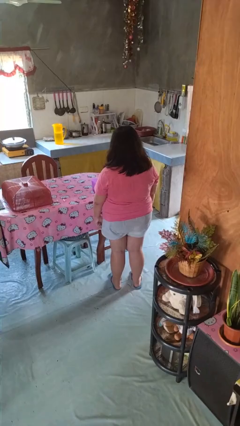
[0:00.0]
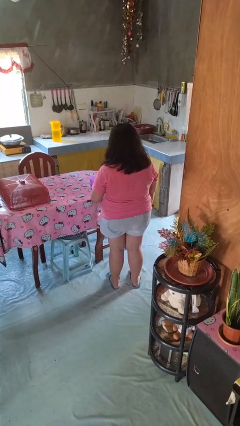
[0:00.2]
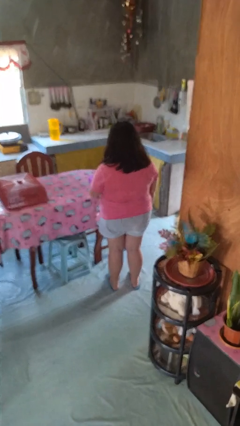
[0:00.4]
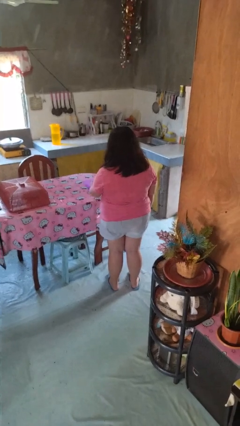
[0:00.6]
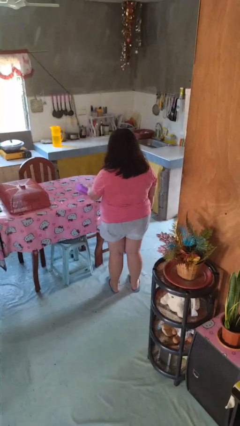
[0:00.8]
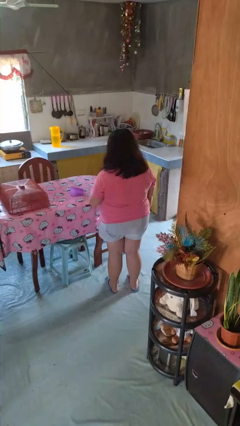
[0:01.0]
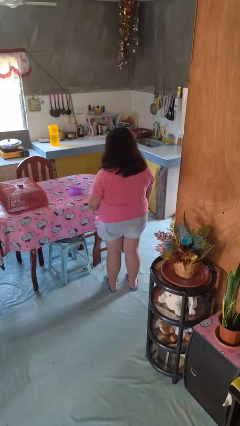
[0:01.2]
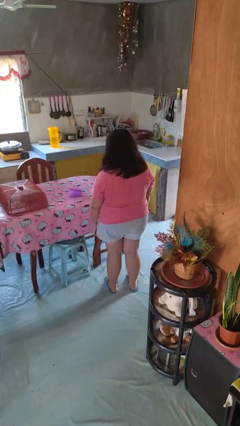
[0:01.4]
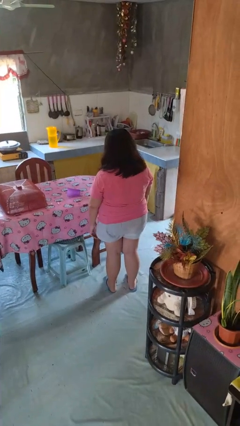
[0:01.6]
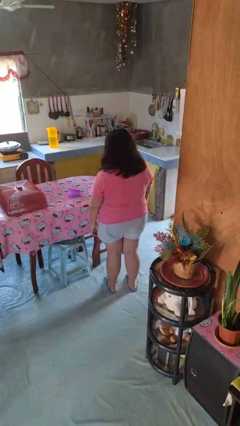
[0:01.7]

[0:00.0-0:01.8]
person spills on table

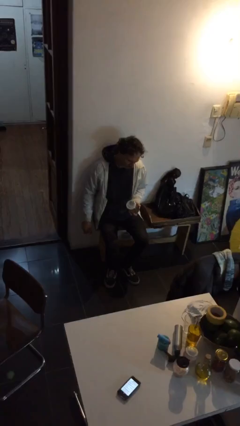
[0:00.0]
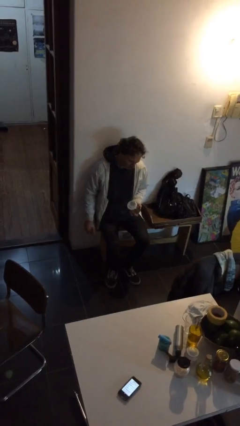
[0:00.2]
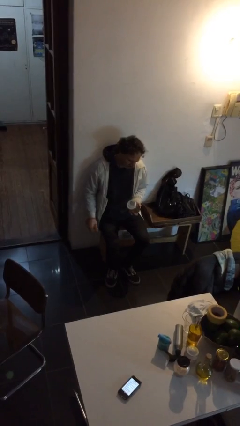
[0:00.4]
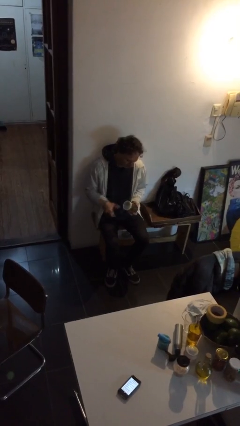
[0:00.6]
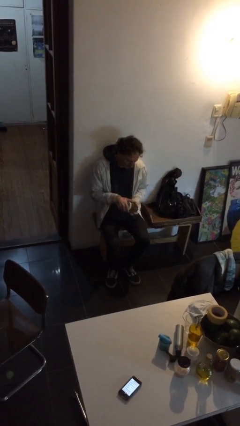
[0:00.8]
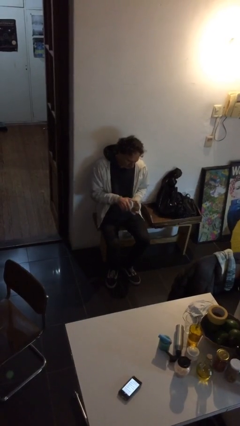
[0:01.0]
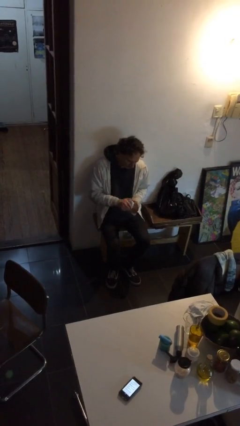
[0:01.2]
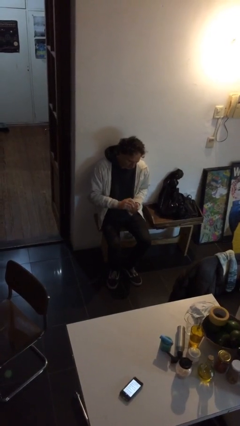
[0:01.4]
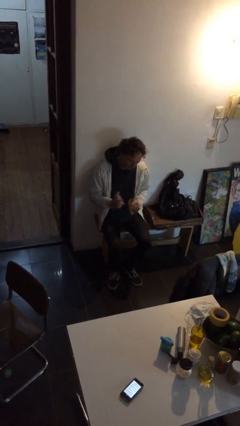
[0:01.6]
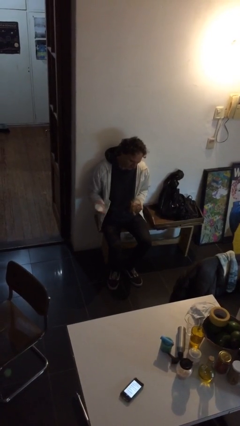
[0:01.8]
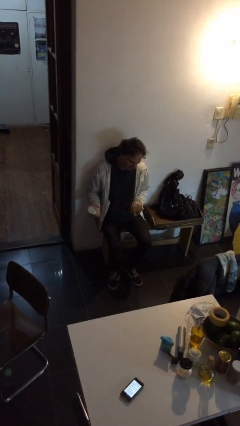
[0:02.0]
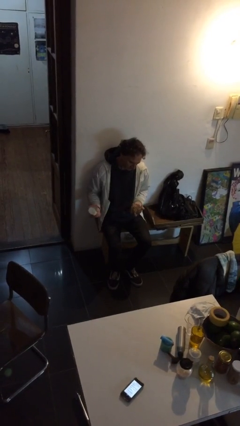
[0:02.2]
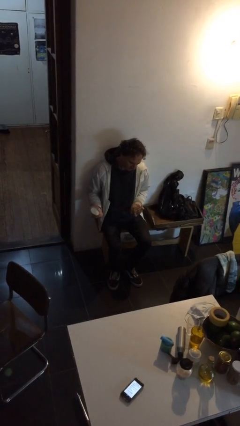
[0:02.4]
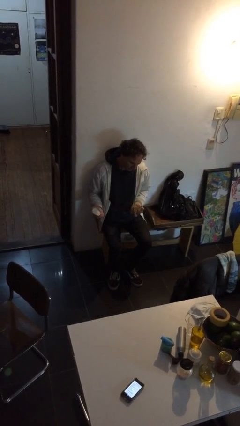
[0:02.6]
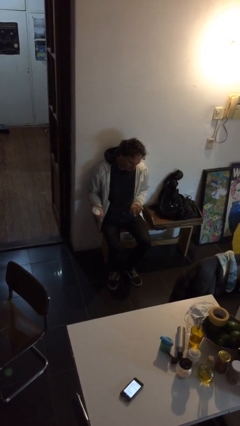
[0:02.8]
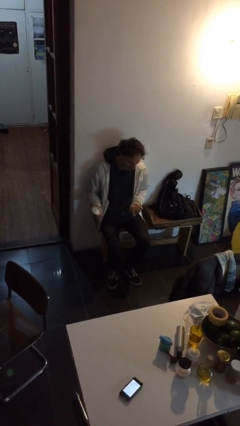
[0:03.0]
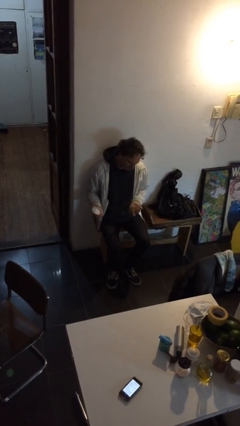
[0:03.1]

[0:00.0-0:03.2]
person opens jar

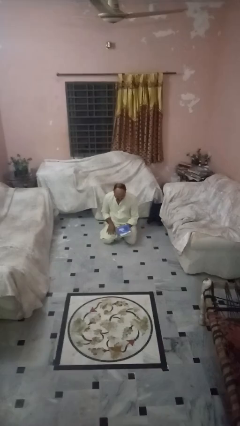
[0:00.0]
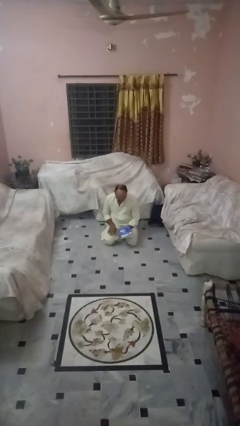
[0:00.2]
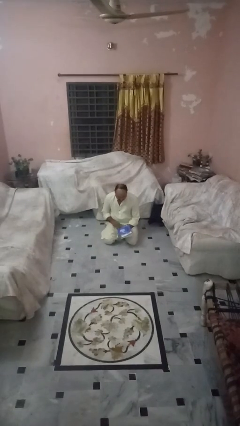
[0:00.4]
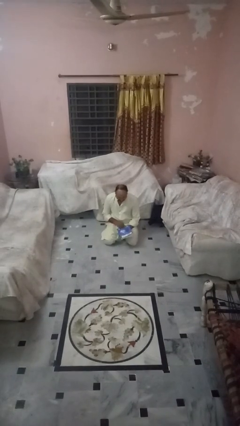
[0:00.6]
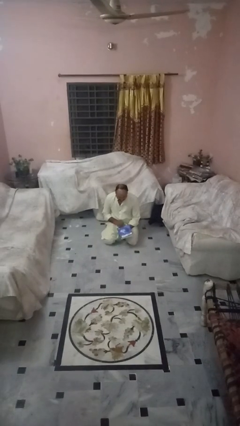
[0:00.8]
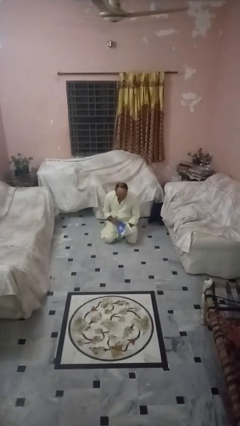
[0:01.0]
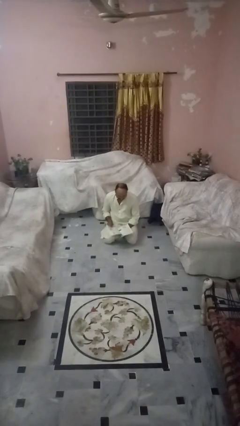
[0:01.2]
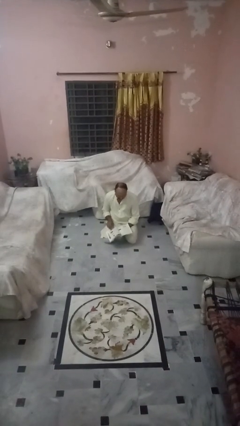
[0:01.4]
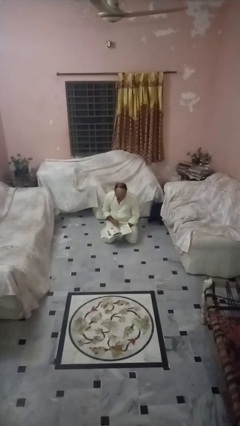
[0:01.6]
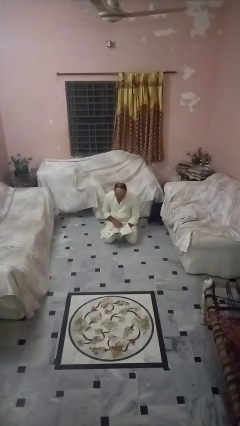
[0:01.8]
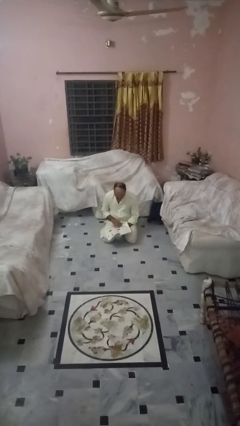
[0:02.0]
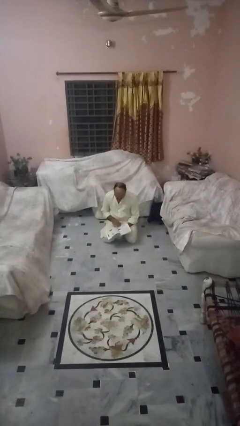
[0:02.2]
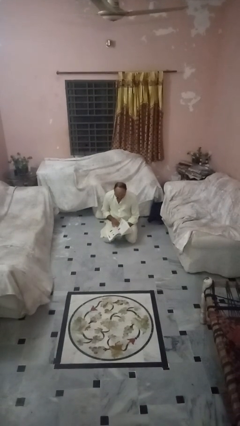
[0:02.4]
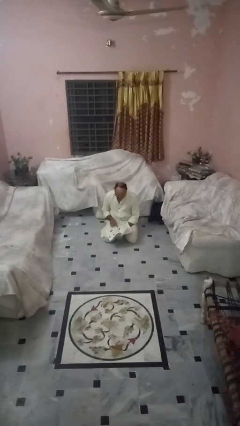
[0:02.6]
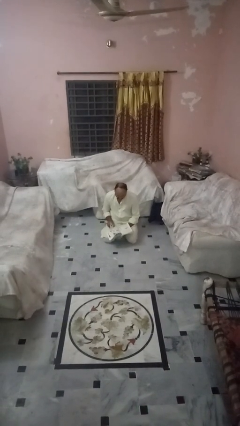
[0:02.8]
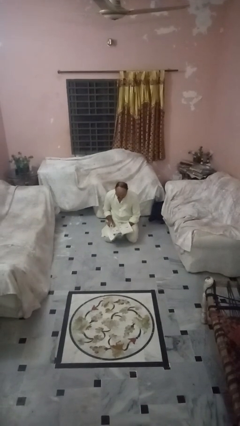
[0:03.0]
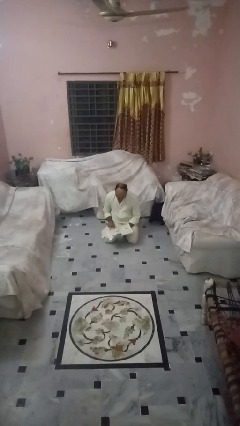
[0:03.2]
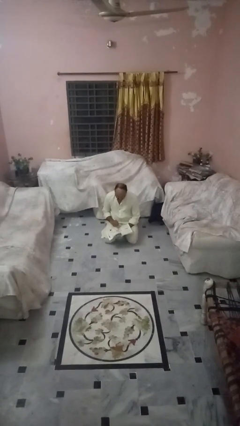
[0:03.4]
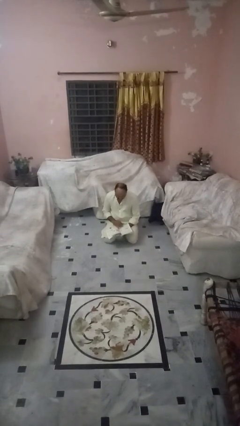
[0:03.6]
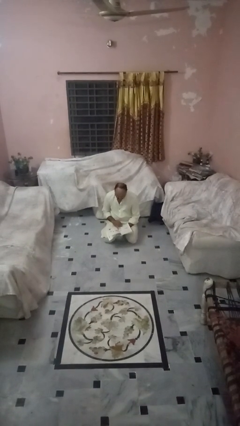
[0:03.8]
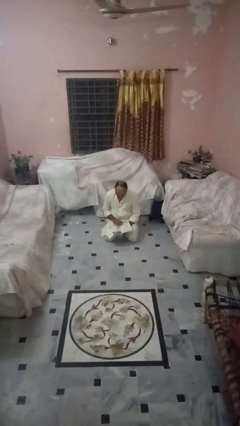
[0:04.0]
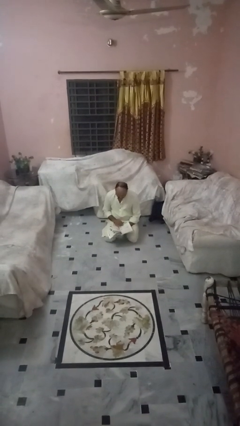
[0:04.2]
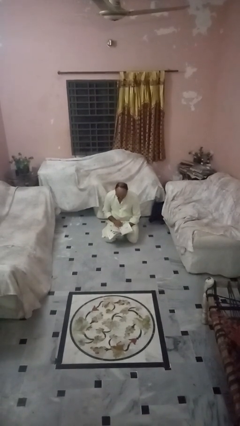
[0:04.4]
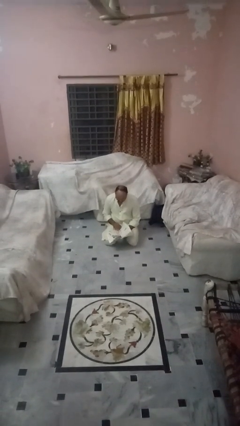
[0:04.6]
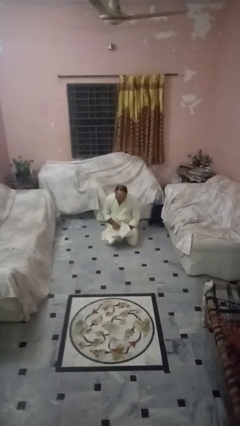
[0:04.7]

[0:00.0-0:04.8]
person reads book

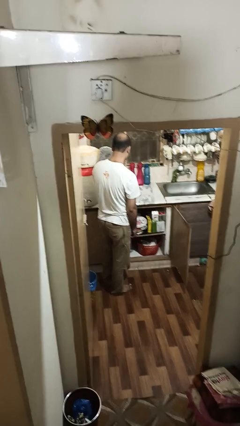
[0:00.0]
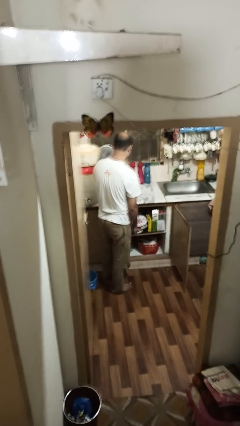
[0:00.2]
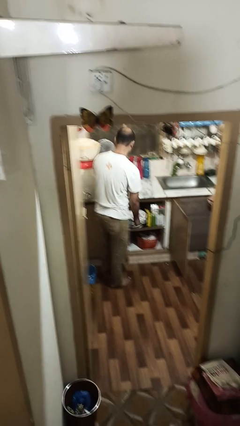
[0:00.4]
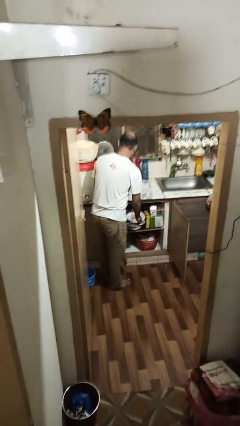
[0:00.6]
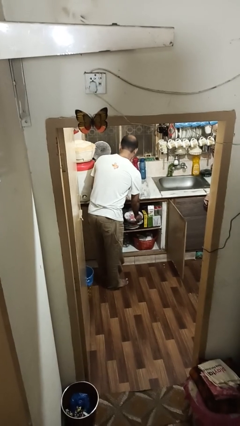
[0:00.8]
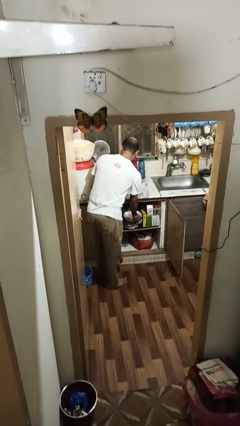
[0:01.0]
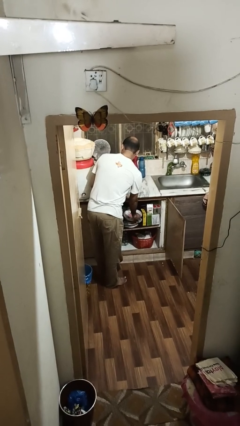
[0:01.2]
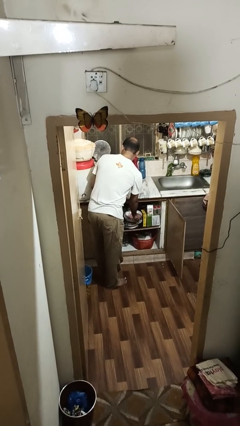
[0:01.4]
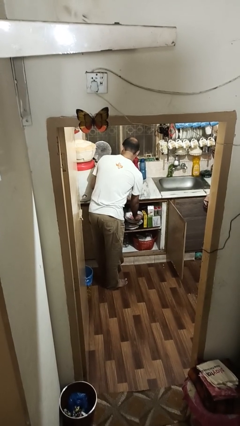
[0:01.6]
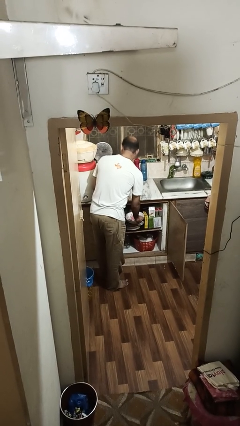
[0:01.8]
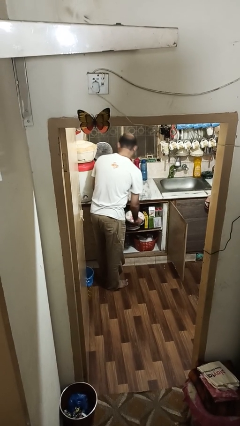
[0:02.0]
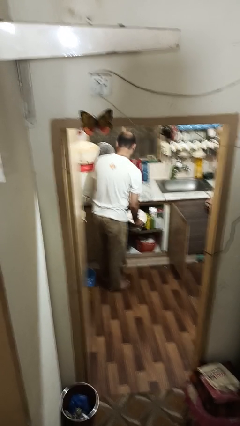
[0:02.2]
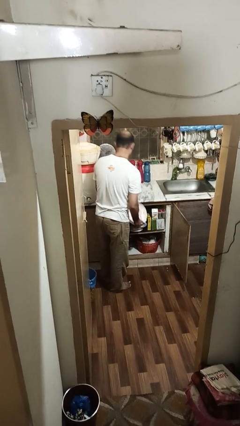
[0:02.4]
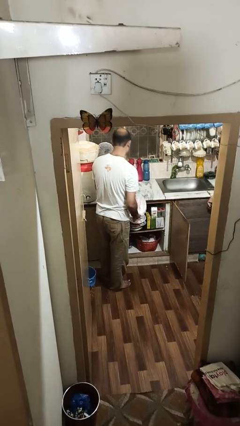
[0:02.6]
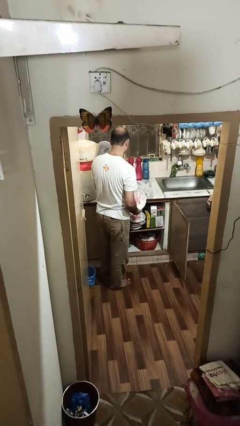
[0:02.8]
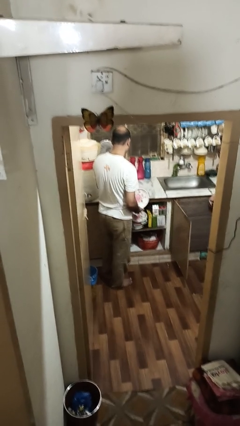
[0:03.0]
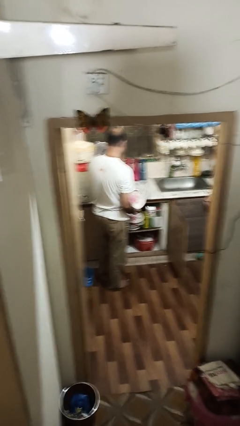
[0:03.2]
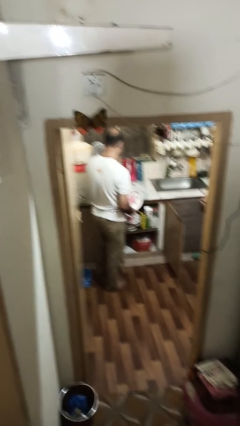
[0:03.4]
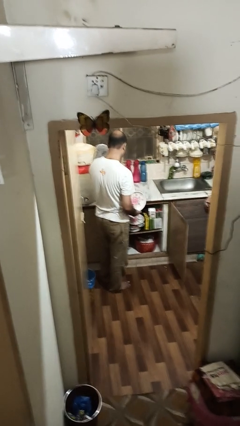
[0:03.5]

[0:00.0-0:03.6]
person takes object from cabinet

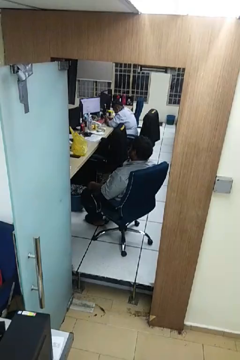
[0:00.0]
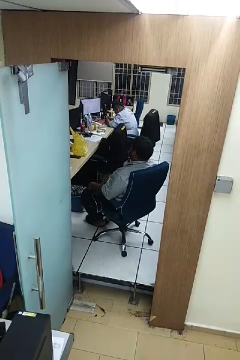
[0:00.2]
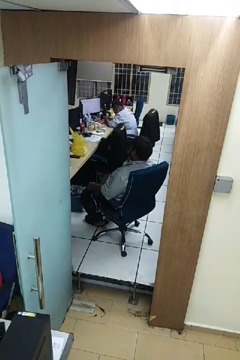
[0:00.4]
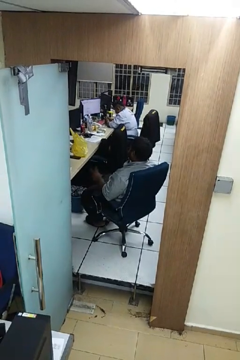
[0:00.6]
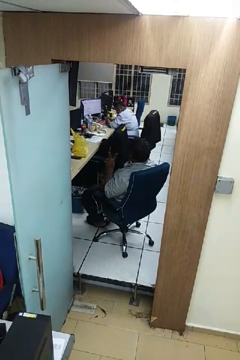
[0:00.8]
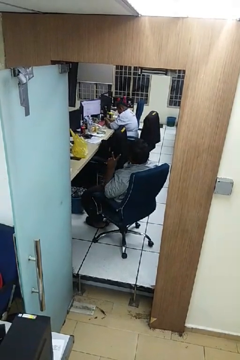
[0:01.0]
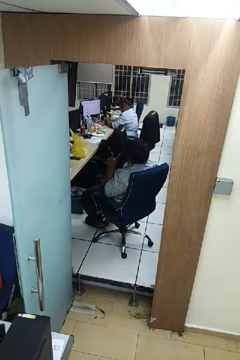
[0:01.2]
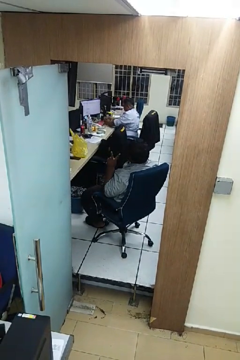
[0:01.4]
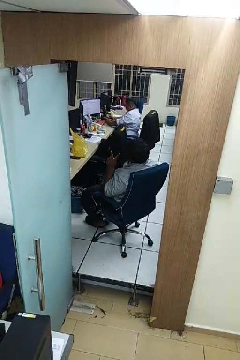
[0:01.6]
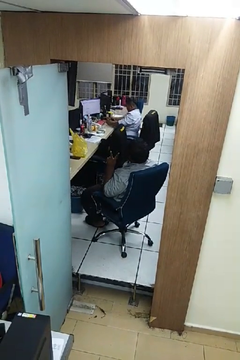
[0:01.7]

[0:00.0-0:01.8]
person gestures peace

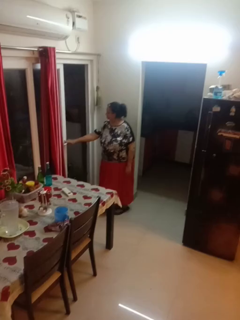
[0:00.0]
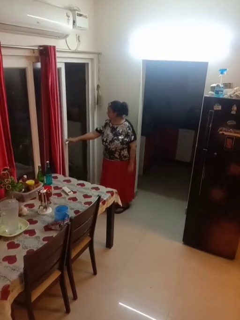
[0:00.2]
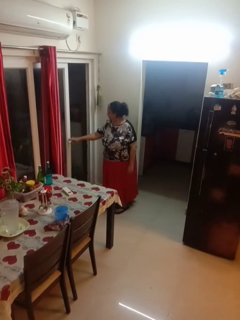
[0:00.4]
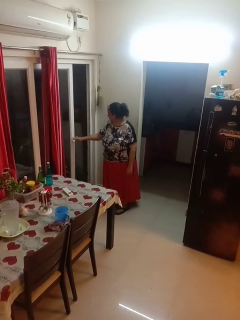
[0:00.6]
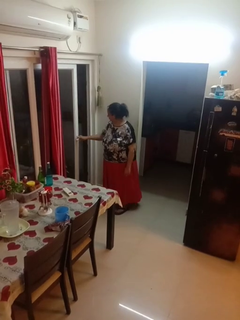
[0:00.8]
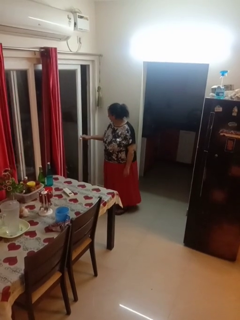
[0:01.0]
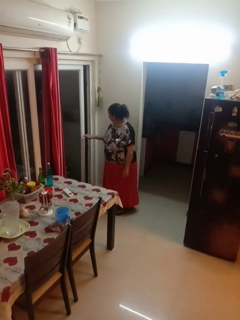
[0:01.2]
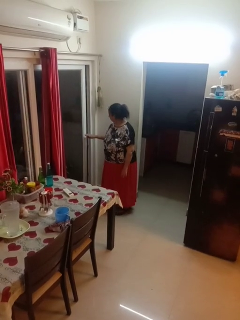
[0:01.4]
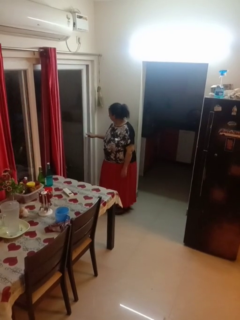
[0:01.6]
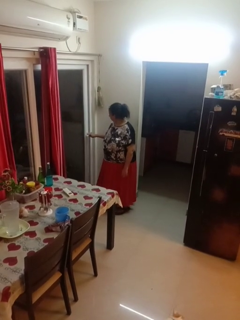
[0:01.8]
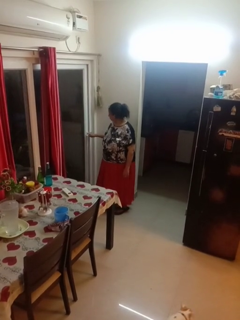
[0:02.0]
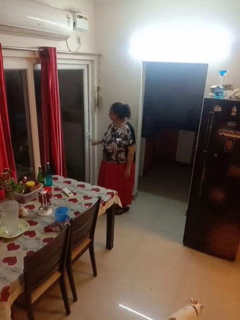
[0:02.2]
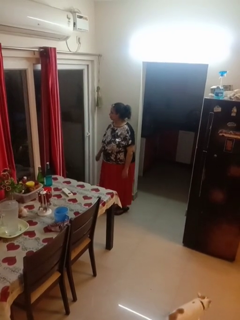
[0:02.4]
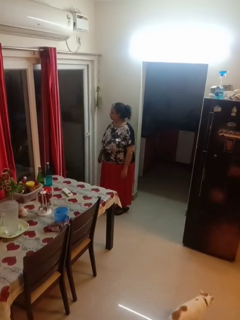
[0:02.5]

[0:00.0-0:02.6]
person closes sliding door

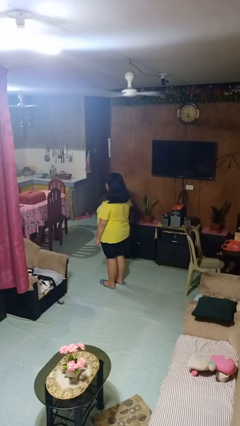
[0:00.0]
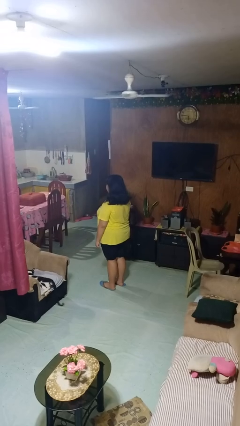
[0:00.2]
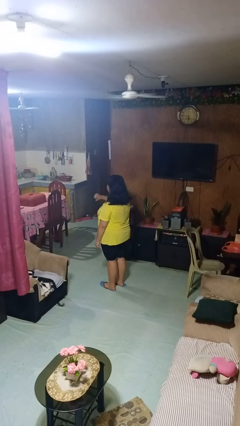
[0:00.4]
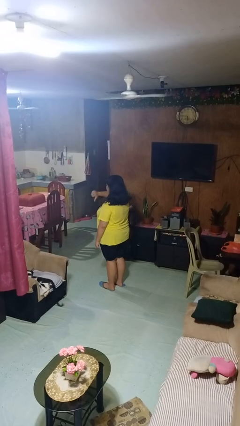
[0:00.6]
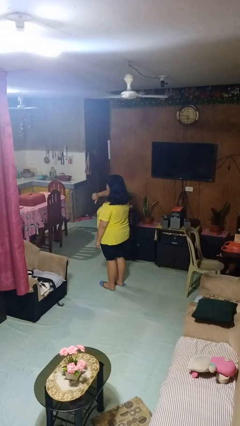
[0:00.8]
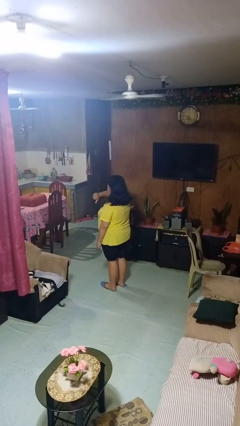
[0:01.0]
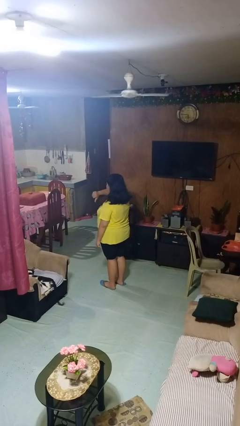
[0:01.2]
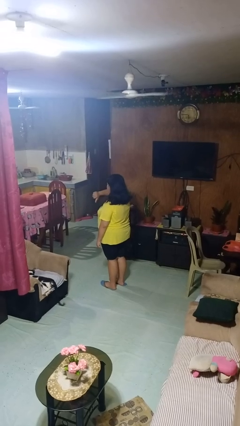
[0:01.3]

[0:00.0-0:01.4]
person gestures thumbs down
